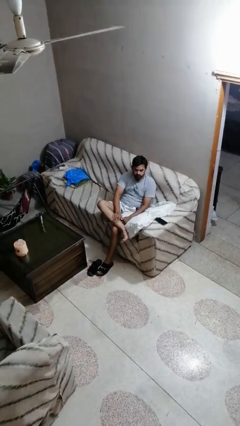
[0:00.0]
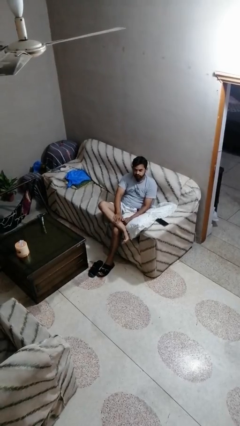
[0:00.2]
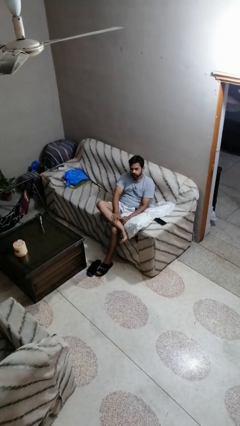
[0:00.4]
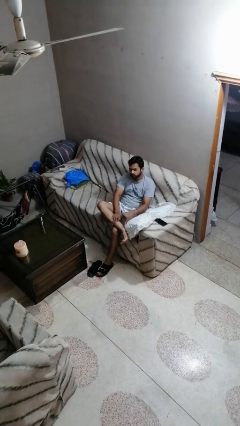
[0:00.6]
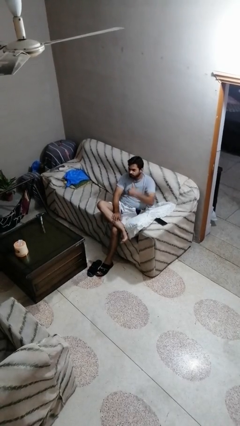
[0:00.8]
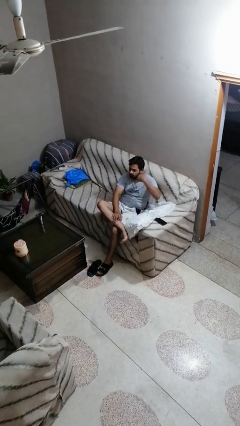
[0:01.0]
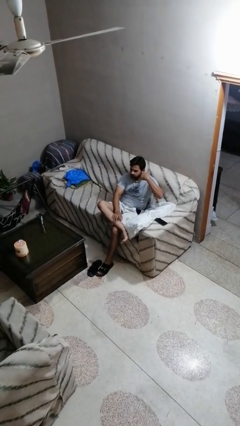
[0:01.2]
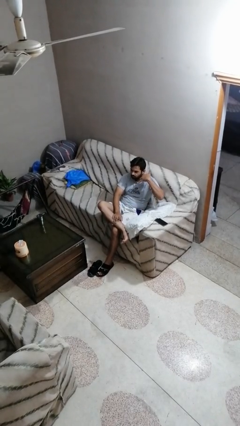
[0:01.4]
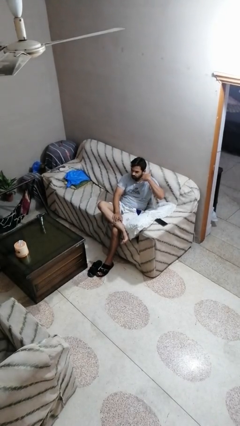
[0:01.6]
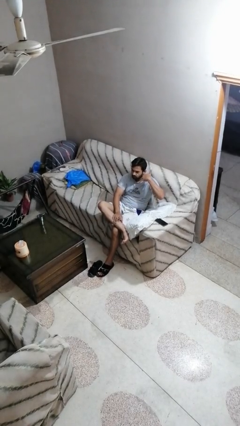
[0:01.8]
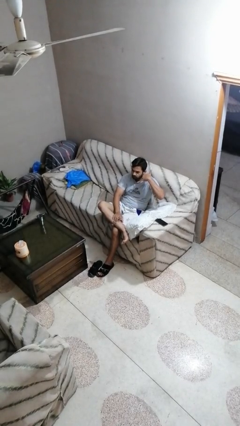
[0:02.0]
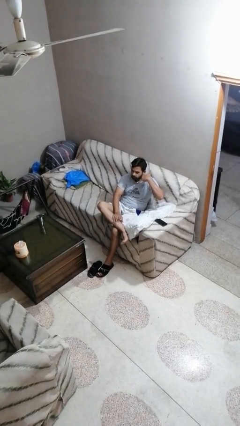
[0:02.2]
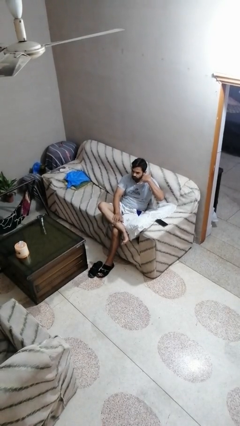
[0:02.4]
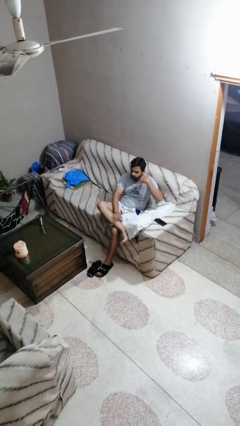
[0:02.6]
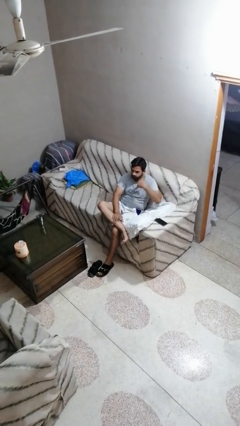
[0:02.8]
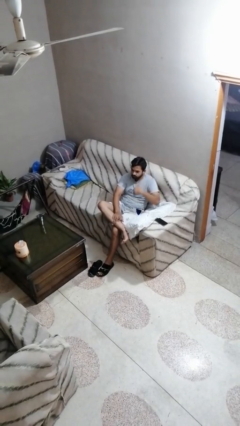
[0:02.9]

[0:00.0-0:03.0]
person gestures call me

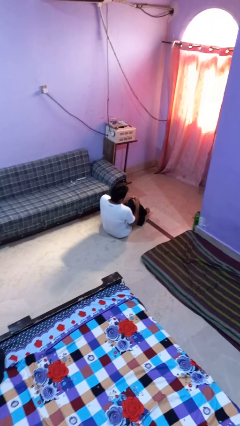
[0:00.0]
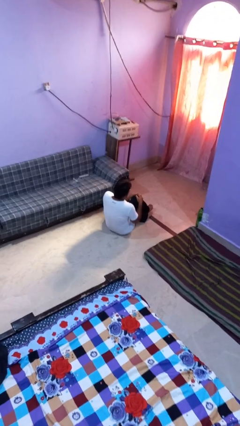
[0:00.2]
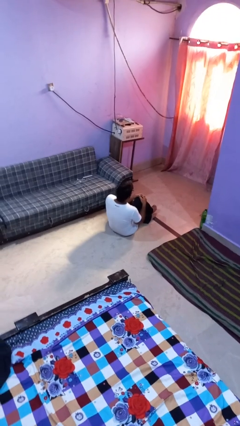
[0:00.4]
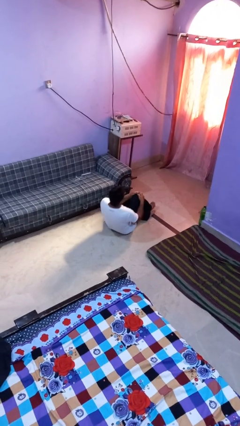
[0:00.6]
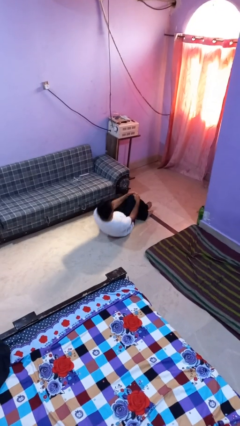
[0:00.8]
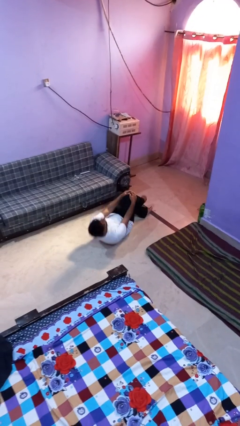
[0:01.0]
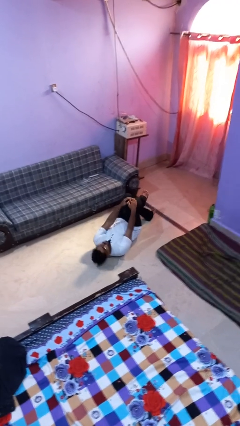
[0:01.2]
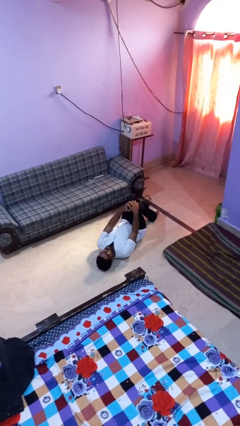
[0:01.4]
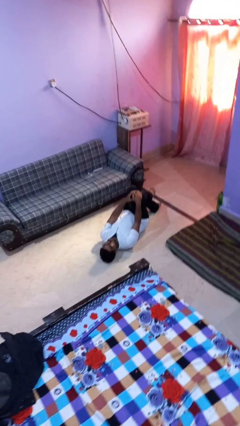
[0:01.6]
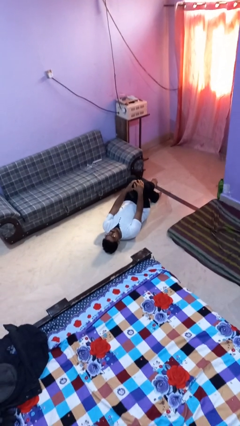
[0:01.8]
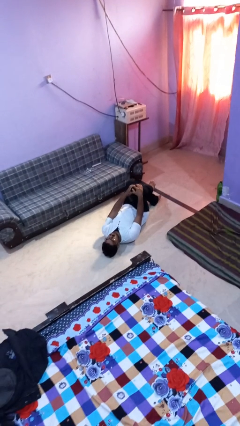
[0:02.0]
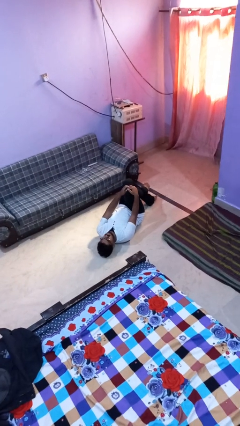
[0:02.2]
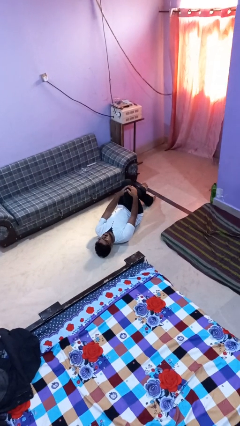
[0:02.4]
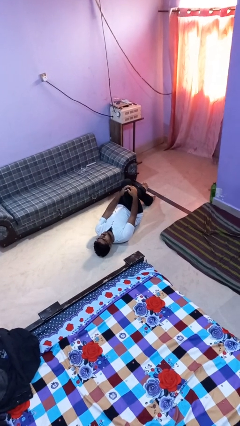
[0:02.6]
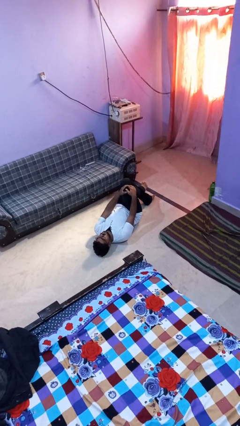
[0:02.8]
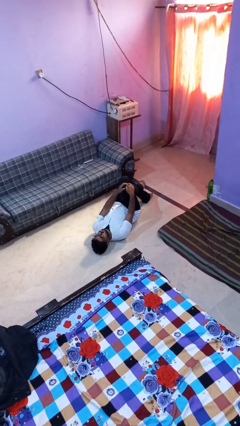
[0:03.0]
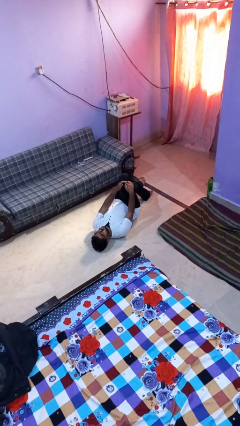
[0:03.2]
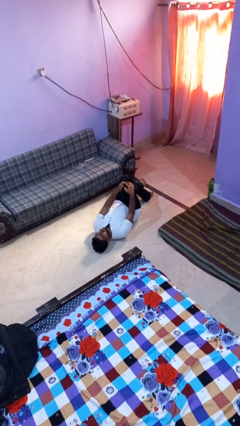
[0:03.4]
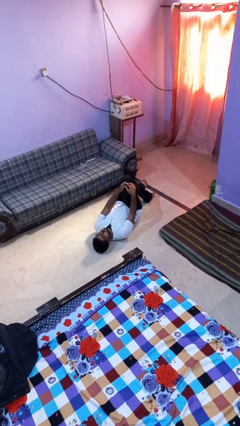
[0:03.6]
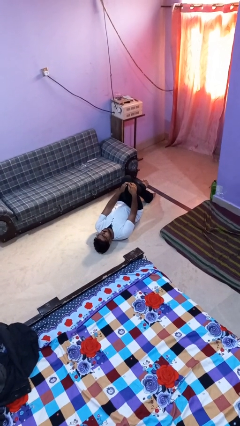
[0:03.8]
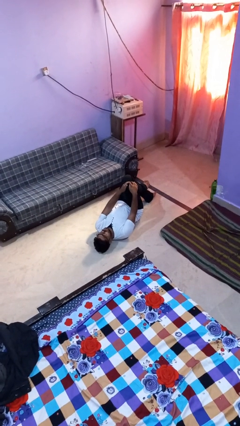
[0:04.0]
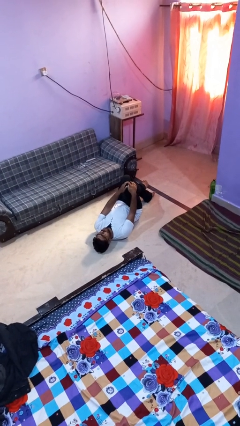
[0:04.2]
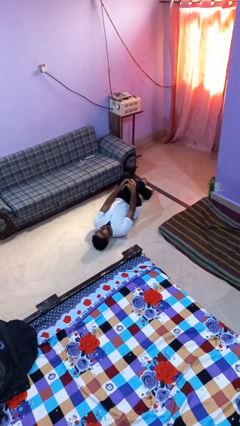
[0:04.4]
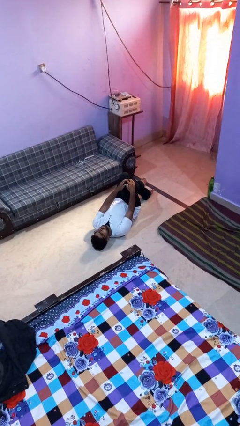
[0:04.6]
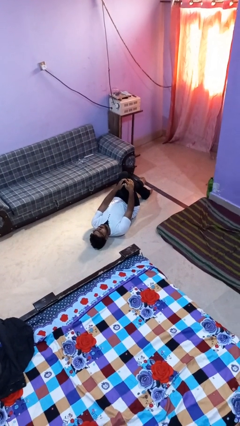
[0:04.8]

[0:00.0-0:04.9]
person lies down on floor

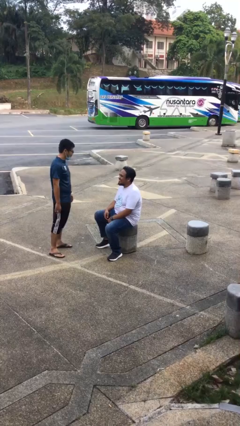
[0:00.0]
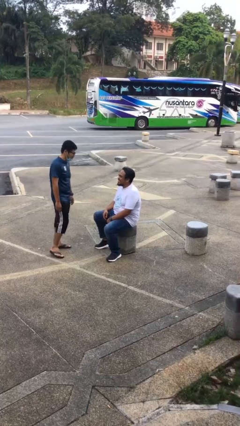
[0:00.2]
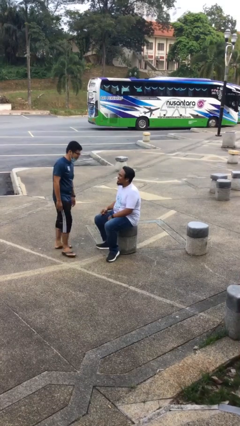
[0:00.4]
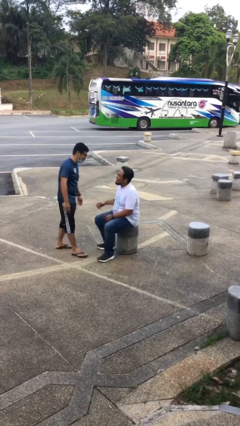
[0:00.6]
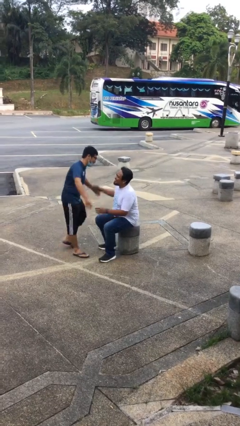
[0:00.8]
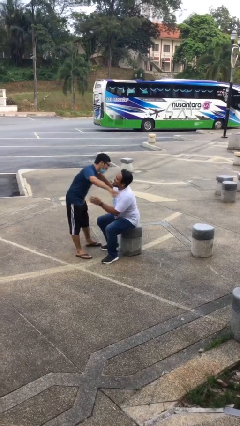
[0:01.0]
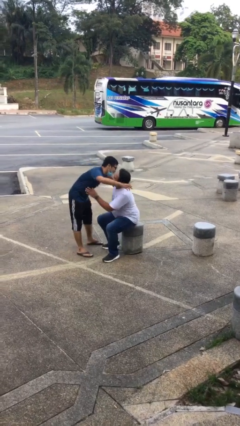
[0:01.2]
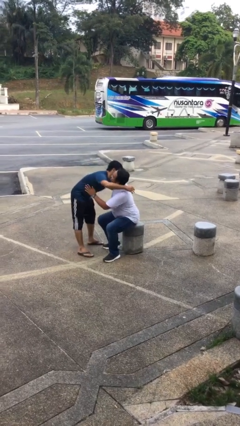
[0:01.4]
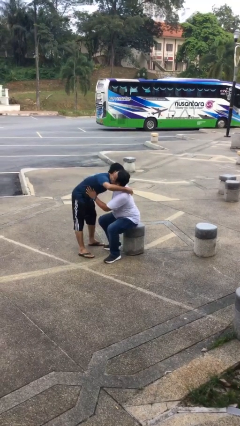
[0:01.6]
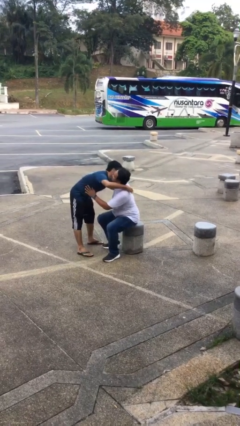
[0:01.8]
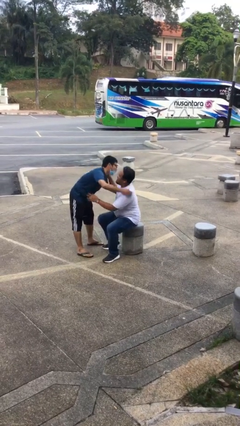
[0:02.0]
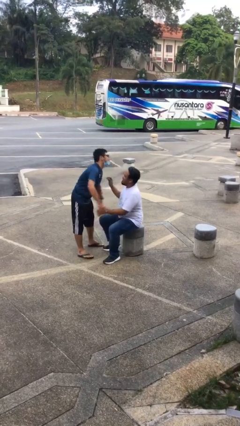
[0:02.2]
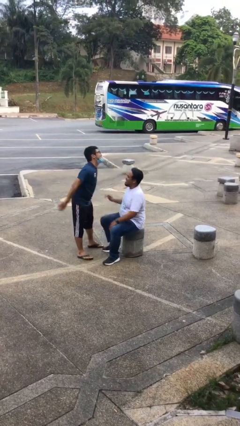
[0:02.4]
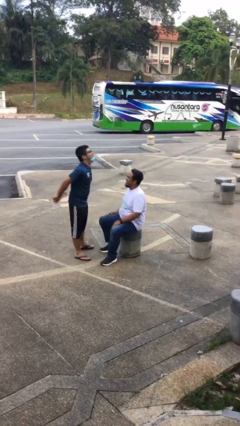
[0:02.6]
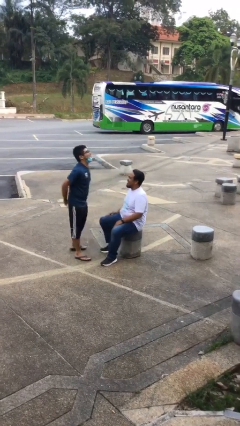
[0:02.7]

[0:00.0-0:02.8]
person embraces person

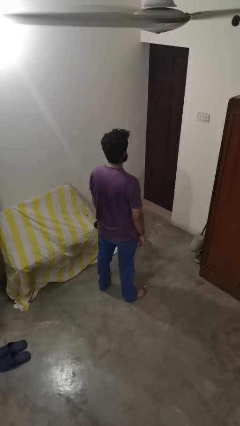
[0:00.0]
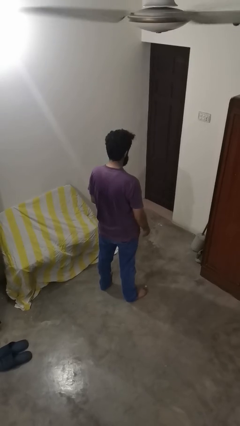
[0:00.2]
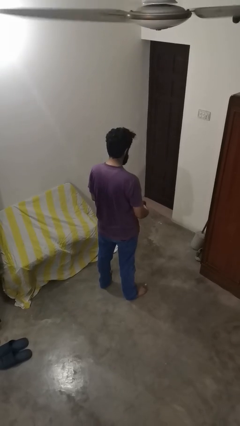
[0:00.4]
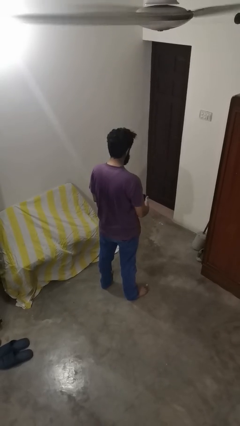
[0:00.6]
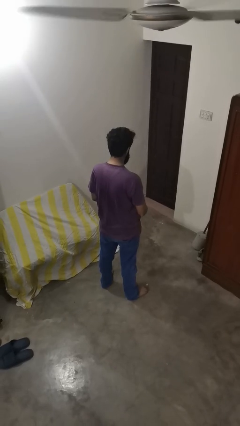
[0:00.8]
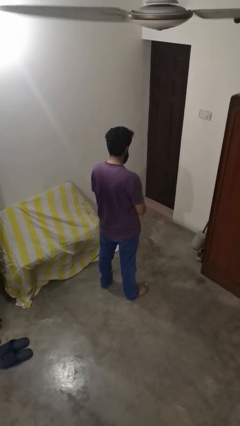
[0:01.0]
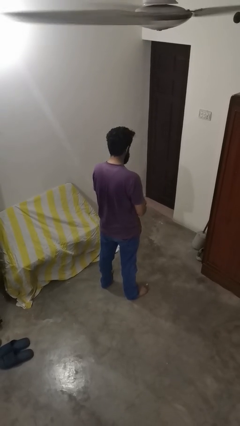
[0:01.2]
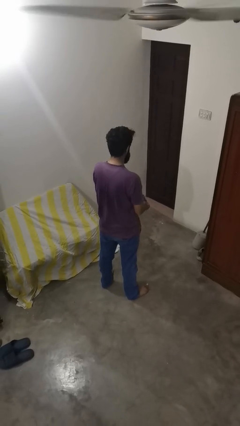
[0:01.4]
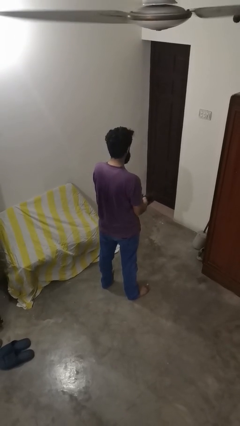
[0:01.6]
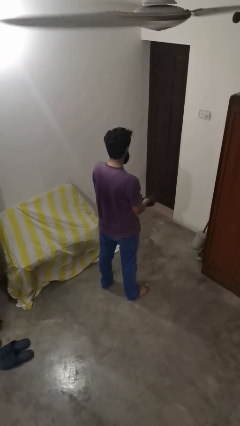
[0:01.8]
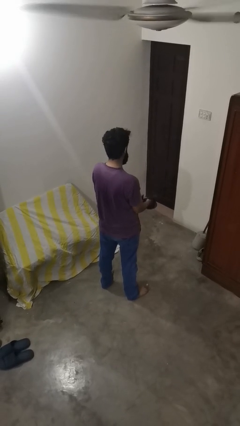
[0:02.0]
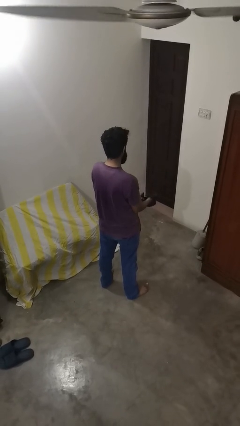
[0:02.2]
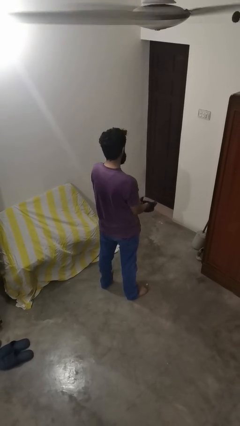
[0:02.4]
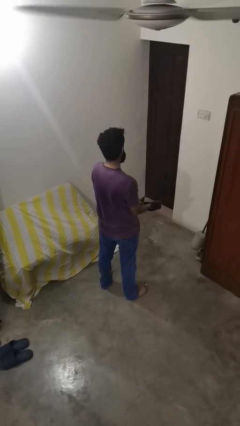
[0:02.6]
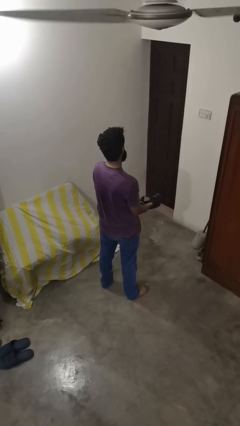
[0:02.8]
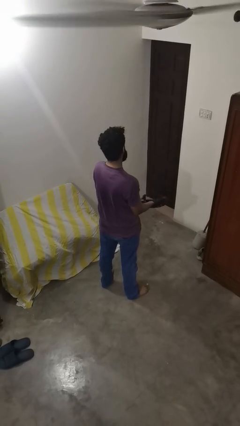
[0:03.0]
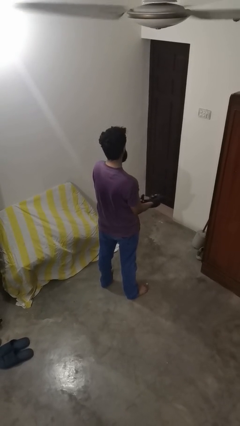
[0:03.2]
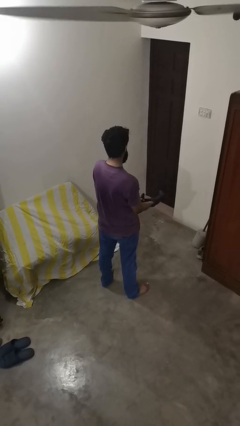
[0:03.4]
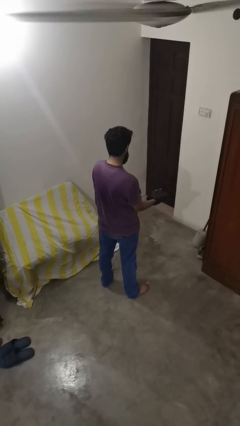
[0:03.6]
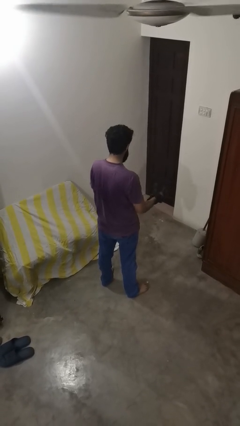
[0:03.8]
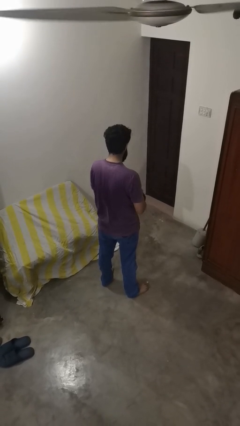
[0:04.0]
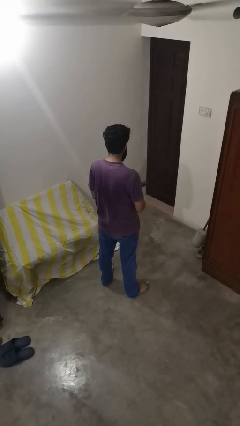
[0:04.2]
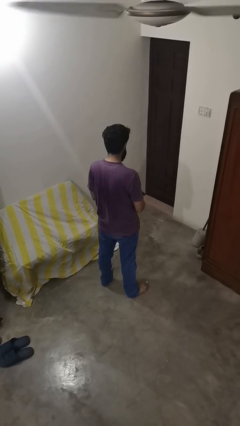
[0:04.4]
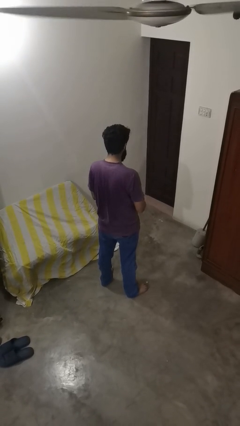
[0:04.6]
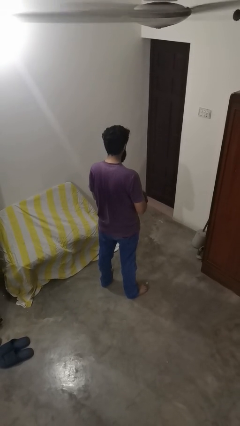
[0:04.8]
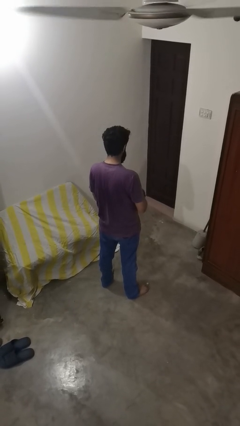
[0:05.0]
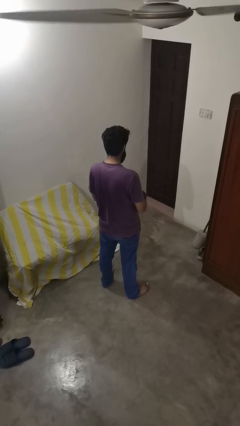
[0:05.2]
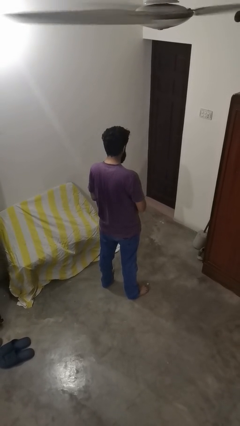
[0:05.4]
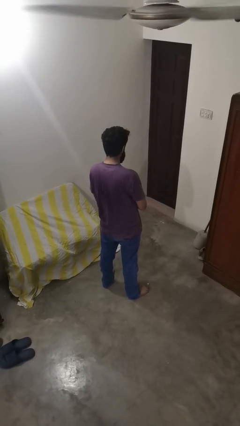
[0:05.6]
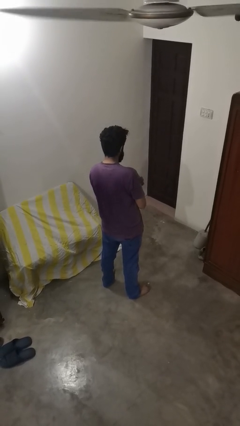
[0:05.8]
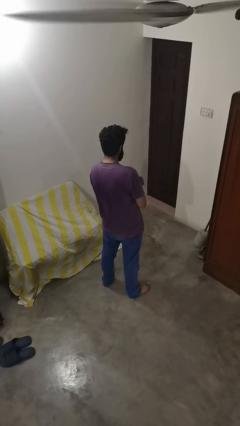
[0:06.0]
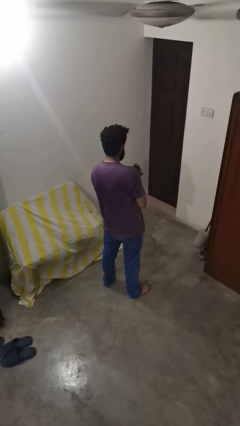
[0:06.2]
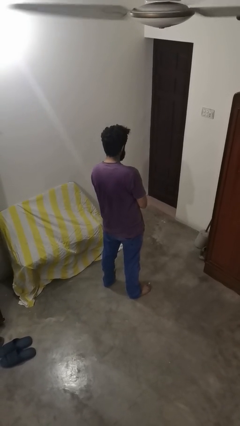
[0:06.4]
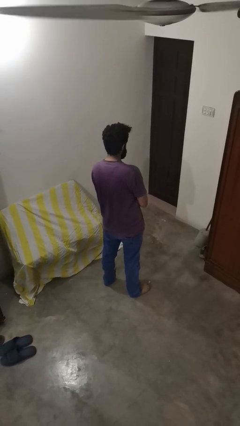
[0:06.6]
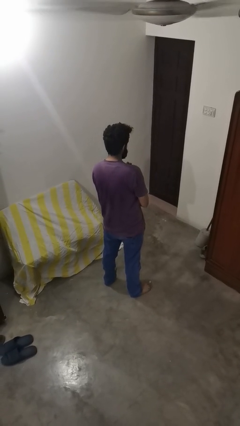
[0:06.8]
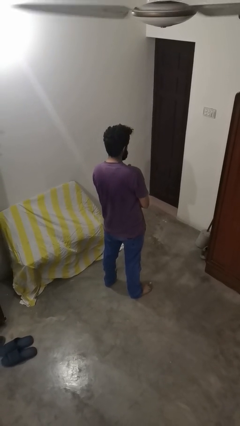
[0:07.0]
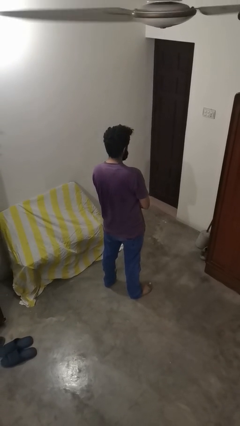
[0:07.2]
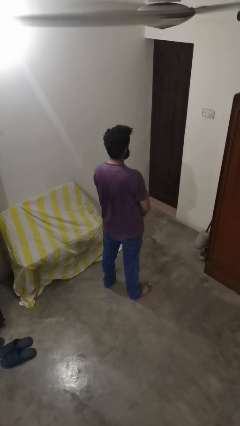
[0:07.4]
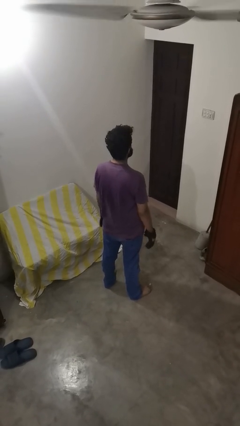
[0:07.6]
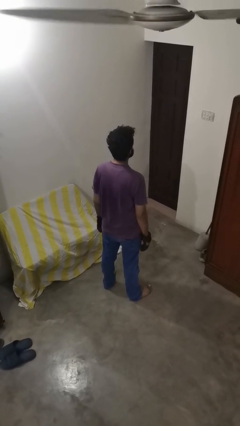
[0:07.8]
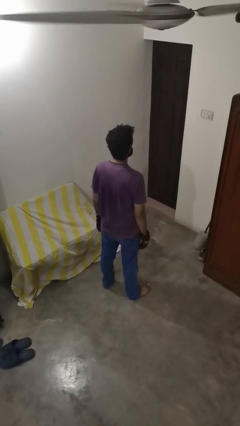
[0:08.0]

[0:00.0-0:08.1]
person puts on gloves
